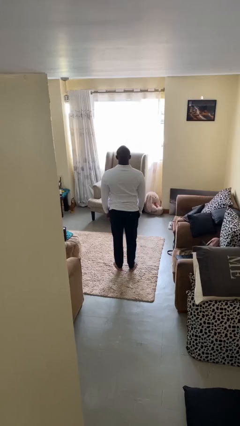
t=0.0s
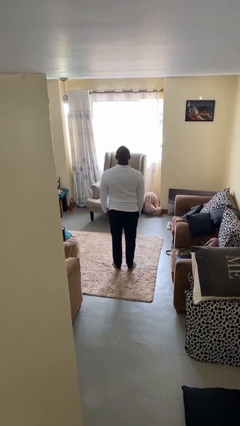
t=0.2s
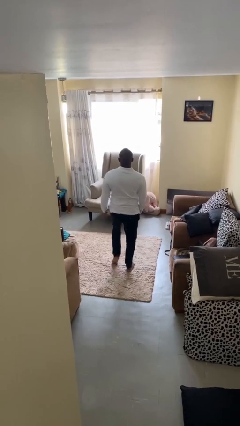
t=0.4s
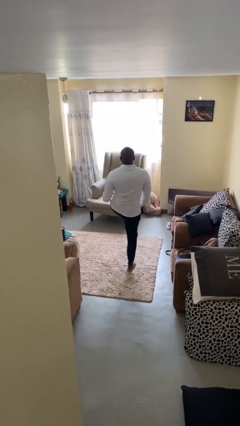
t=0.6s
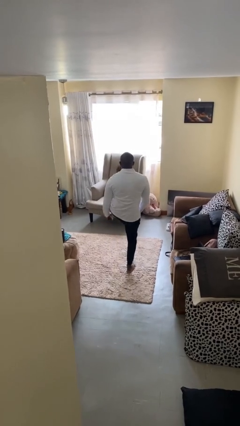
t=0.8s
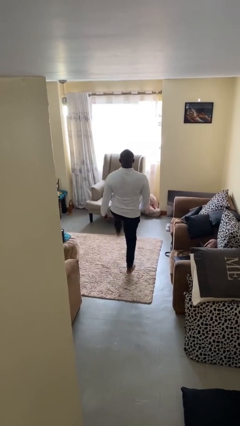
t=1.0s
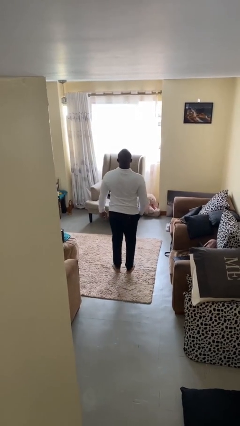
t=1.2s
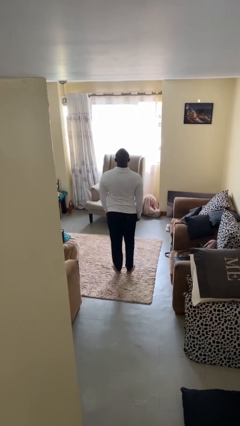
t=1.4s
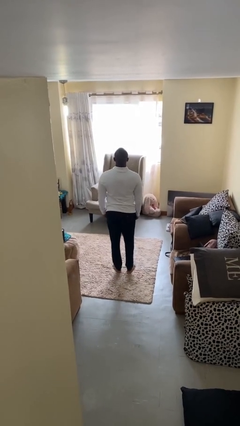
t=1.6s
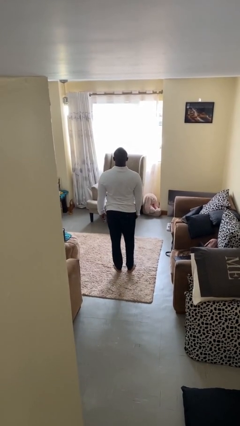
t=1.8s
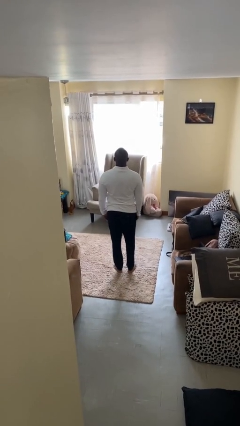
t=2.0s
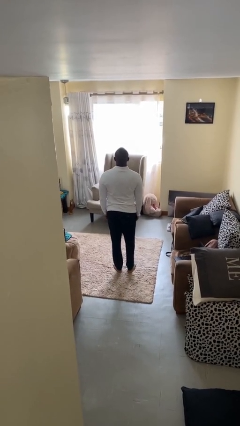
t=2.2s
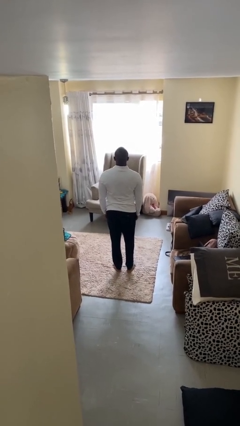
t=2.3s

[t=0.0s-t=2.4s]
person karate kicks

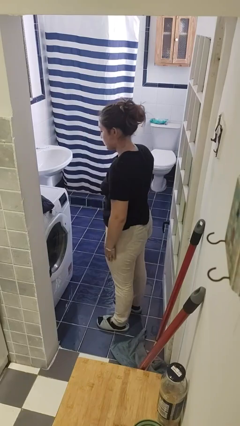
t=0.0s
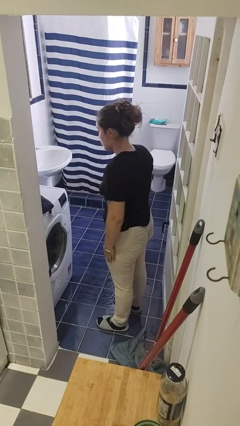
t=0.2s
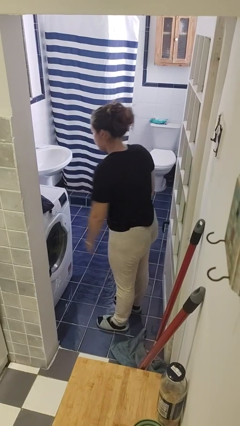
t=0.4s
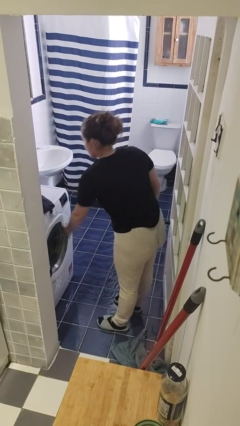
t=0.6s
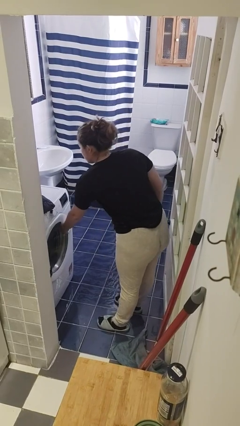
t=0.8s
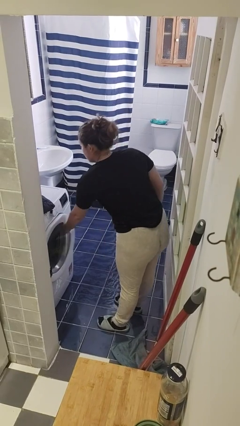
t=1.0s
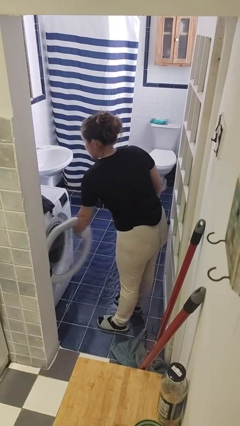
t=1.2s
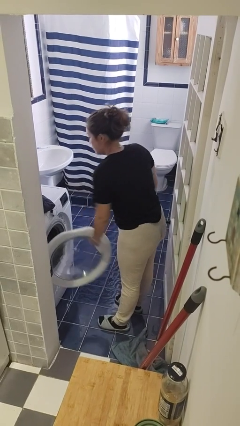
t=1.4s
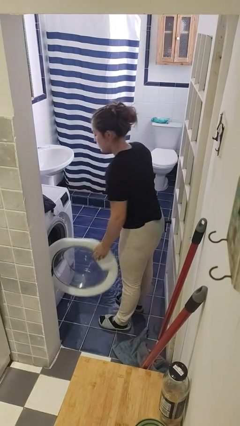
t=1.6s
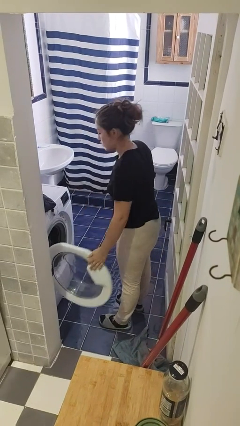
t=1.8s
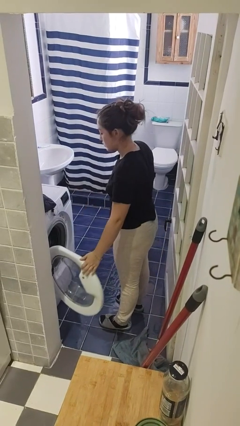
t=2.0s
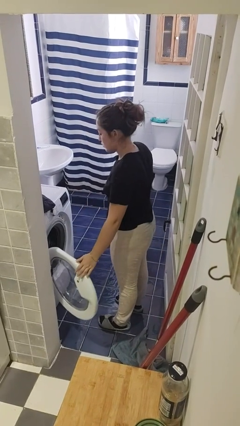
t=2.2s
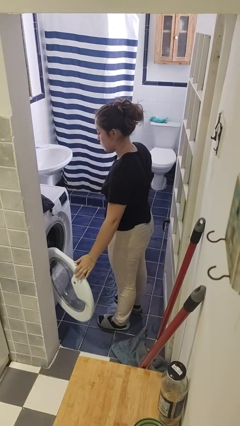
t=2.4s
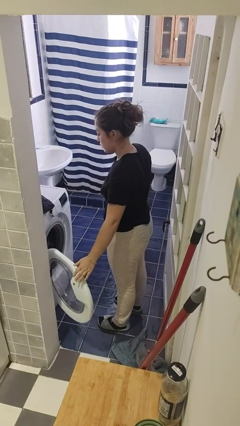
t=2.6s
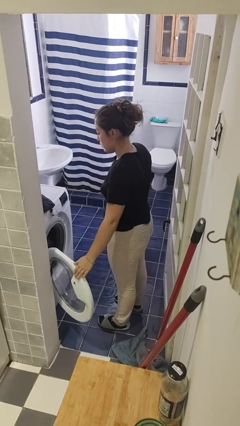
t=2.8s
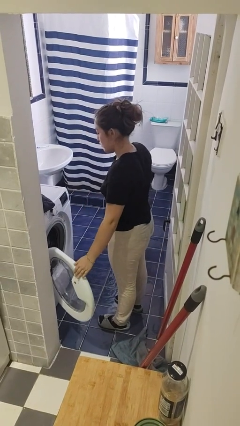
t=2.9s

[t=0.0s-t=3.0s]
person opens clothes washer

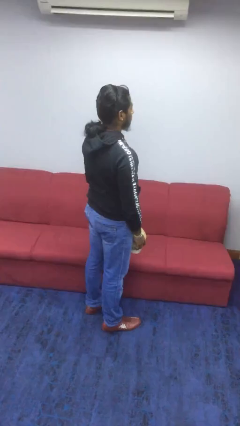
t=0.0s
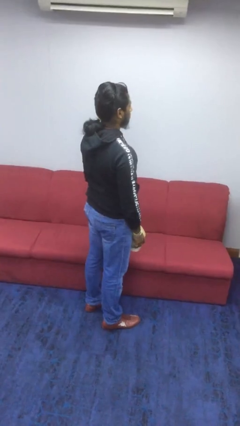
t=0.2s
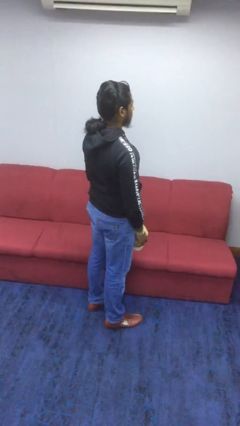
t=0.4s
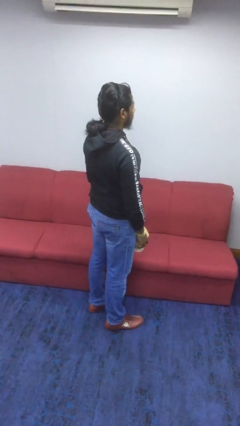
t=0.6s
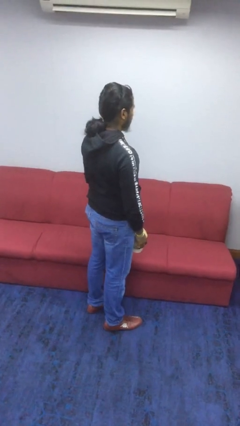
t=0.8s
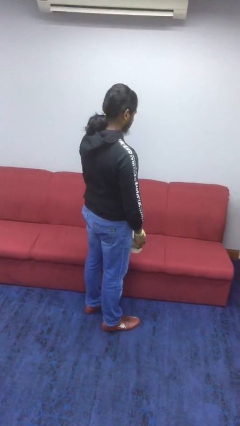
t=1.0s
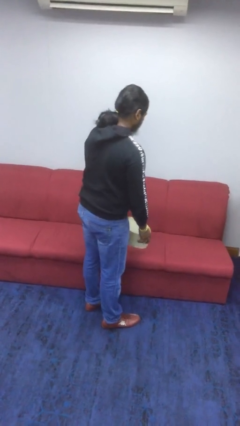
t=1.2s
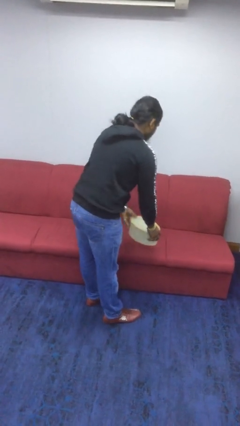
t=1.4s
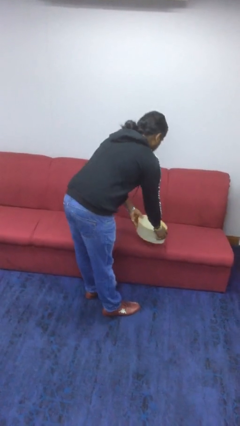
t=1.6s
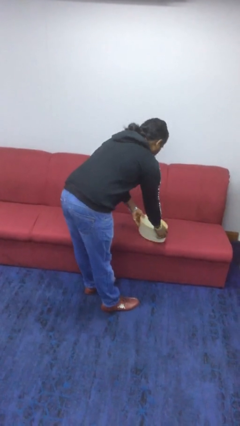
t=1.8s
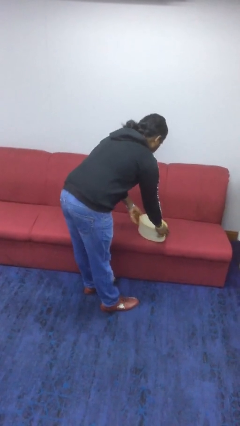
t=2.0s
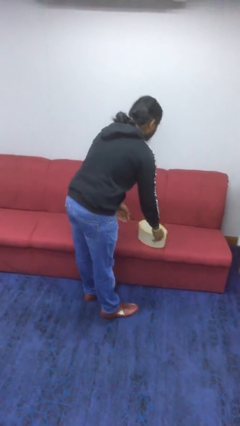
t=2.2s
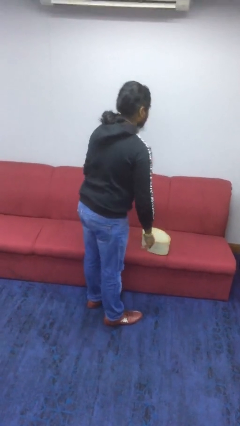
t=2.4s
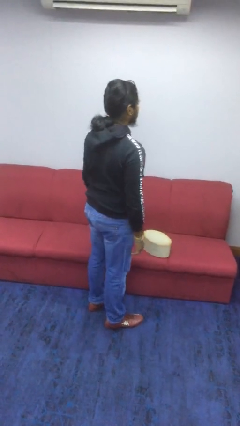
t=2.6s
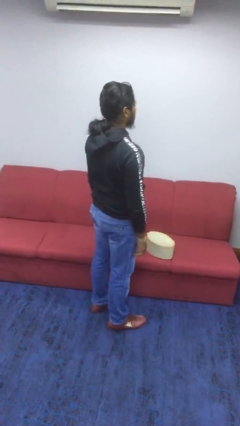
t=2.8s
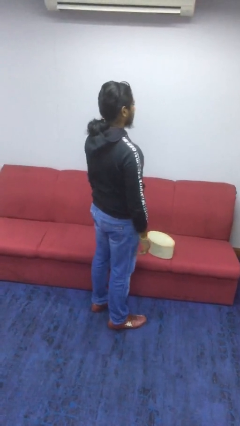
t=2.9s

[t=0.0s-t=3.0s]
person puts down object on couch

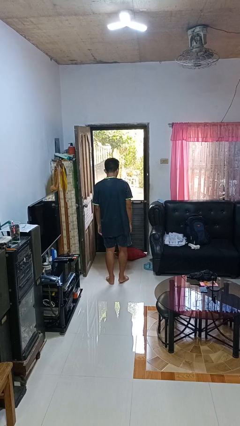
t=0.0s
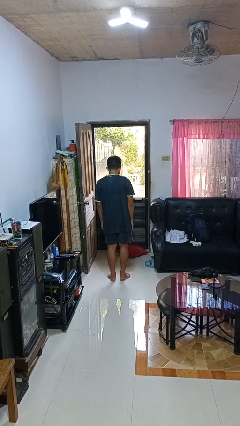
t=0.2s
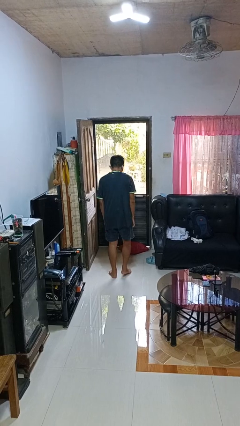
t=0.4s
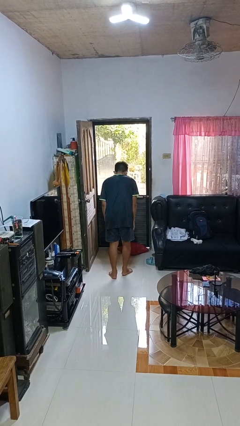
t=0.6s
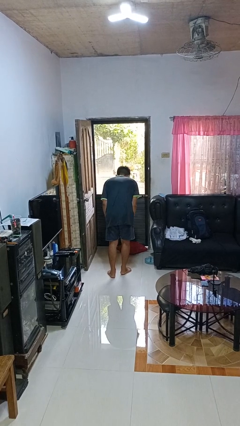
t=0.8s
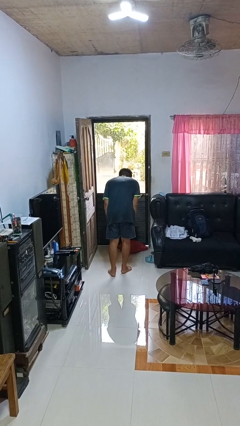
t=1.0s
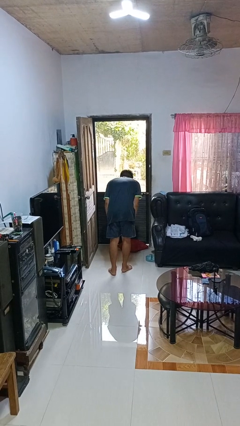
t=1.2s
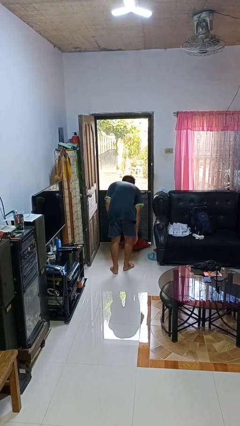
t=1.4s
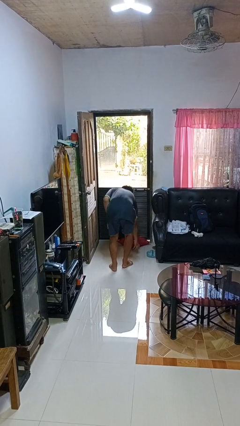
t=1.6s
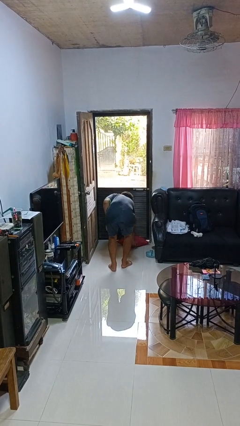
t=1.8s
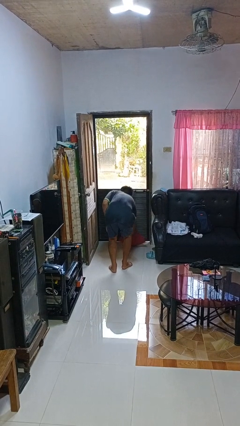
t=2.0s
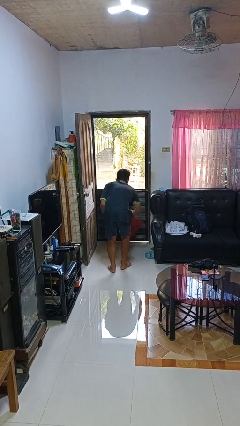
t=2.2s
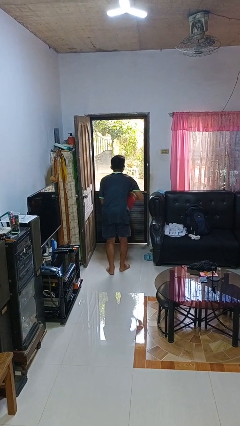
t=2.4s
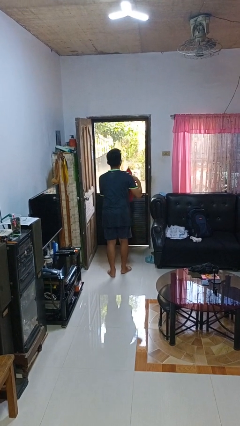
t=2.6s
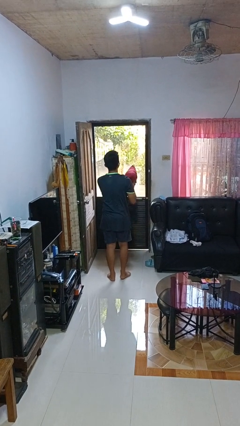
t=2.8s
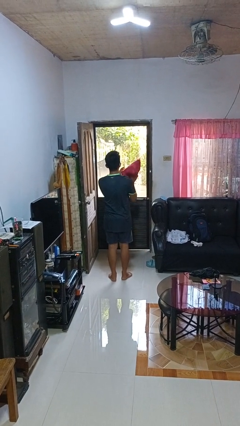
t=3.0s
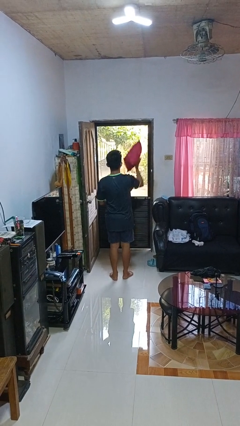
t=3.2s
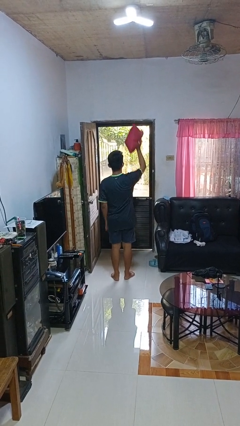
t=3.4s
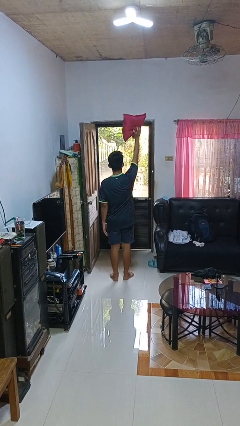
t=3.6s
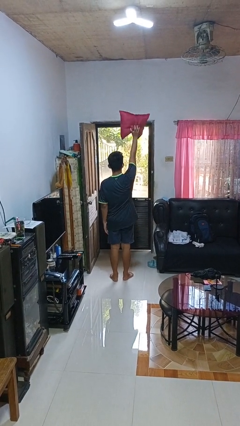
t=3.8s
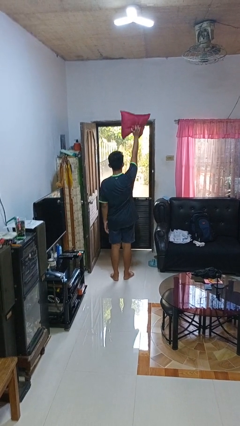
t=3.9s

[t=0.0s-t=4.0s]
person picks up object from floor

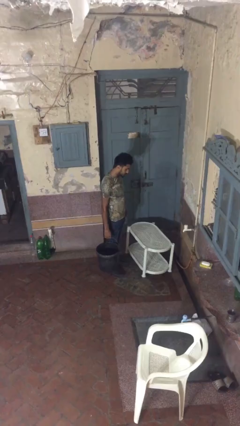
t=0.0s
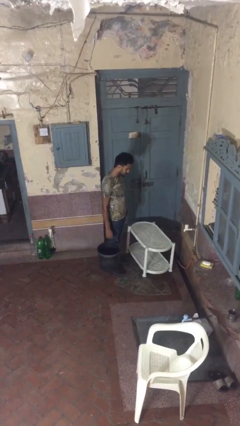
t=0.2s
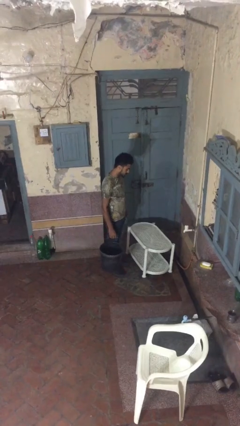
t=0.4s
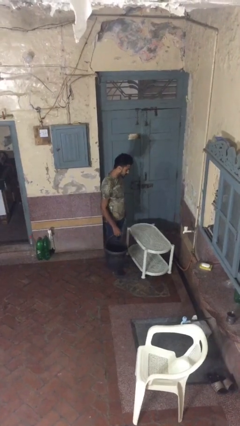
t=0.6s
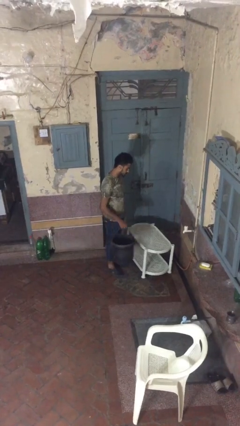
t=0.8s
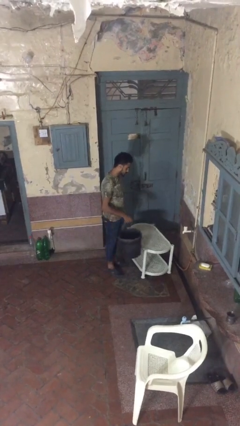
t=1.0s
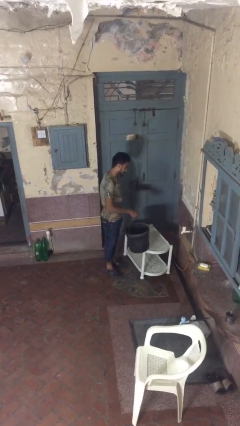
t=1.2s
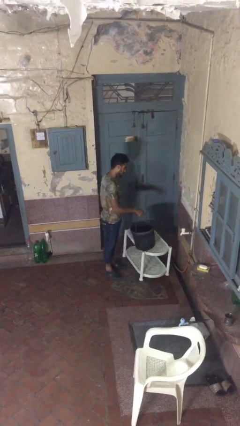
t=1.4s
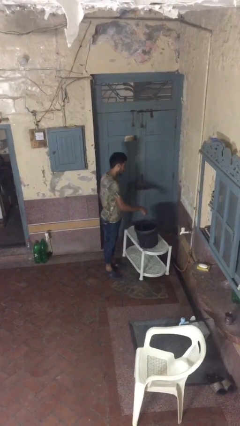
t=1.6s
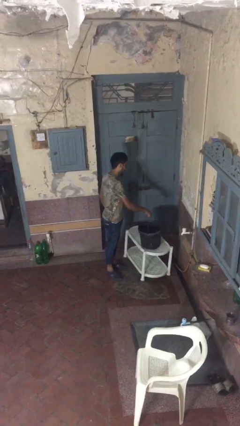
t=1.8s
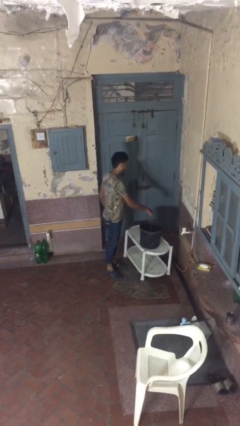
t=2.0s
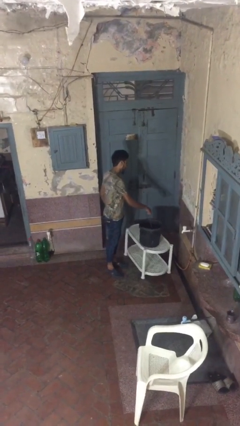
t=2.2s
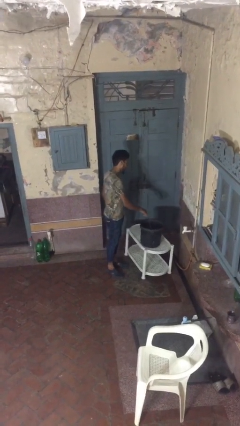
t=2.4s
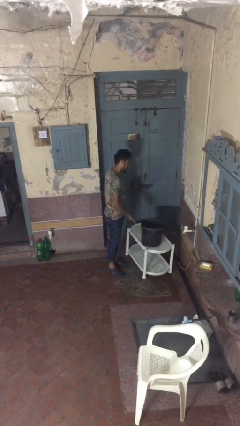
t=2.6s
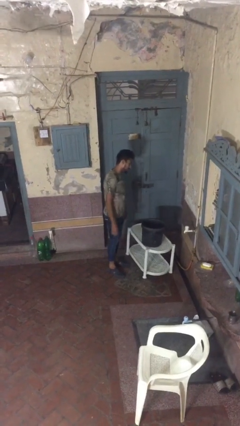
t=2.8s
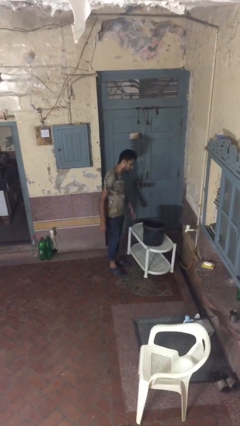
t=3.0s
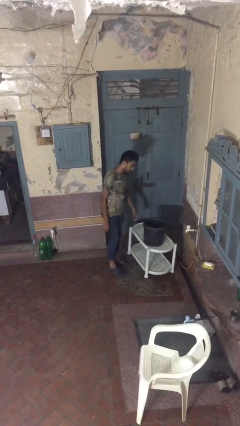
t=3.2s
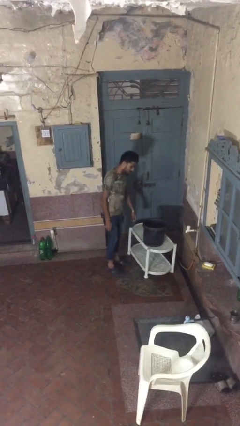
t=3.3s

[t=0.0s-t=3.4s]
person puts down object on table

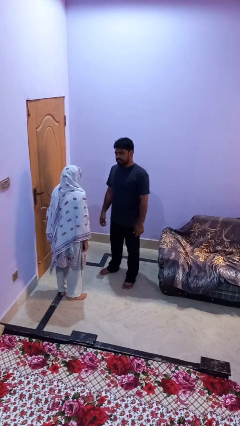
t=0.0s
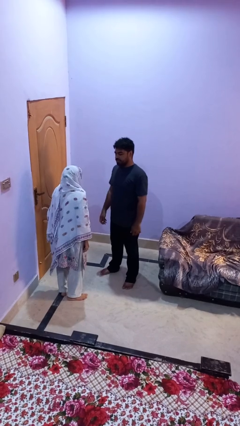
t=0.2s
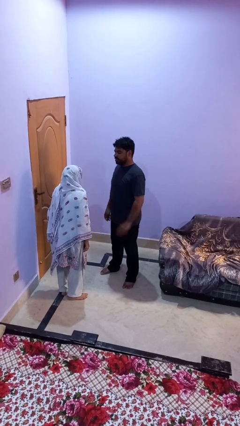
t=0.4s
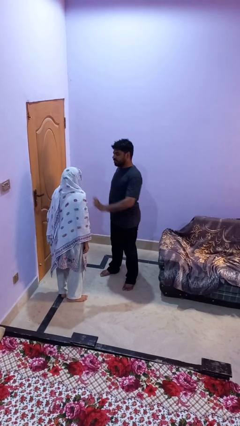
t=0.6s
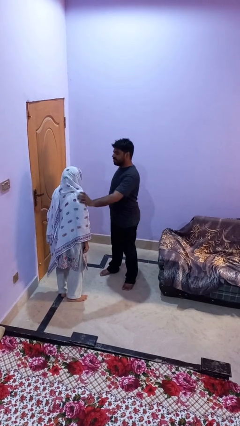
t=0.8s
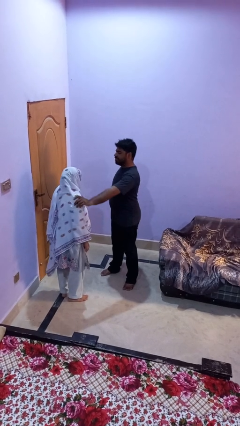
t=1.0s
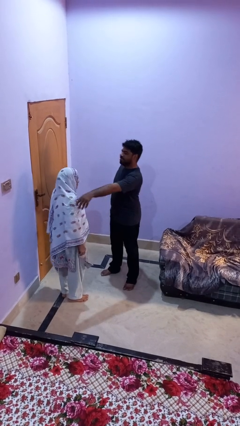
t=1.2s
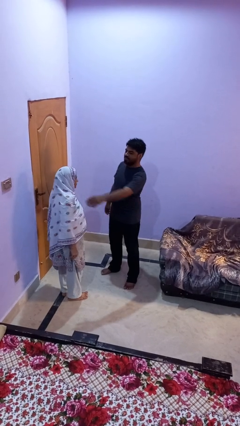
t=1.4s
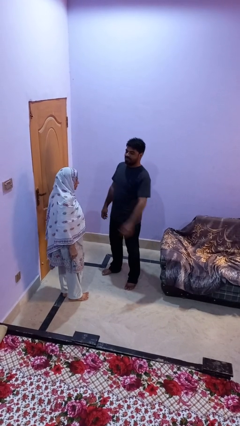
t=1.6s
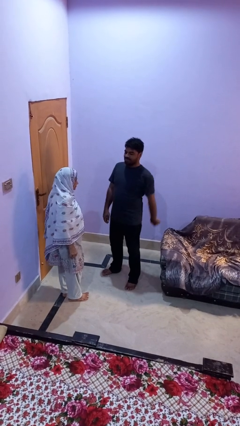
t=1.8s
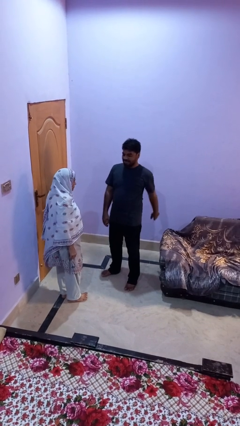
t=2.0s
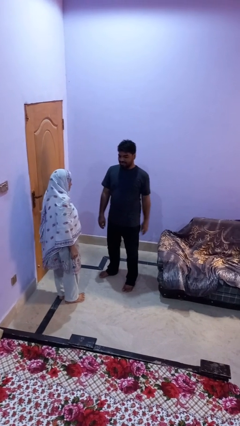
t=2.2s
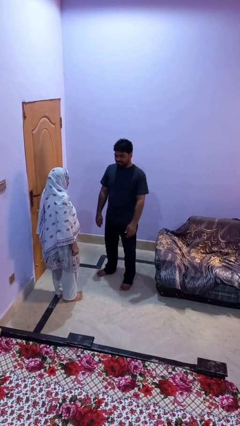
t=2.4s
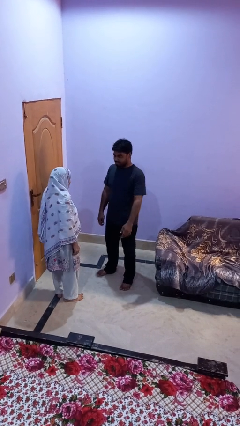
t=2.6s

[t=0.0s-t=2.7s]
person shoves person
